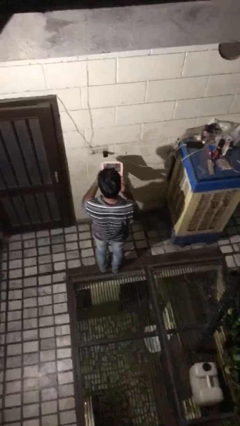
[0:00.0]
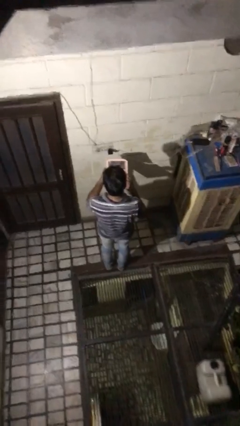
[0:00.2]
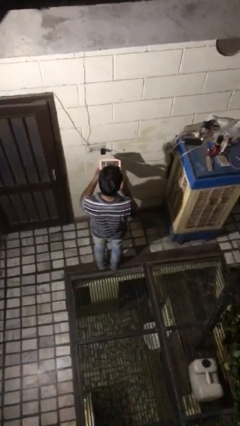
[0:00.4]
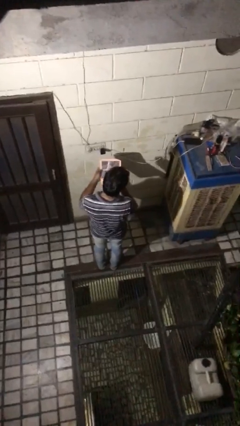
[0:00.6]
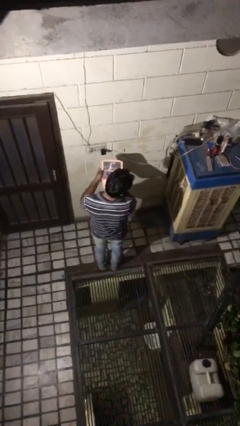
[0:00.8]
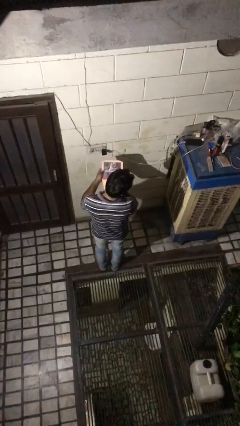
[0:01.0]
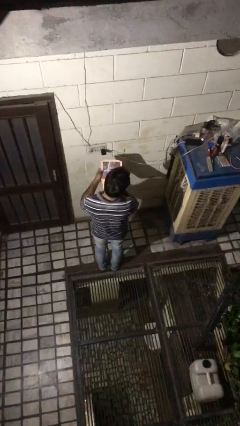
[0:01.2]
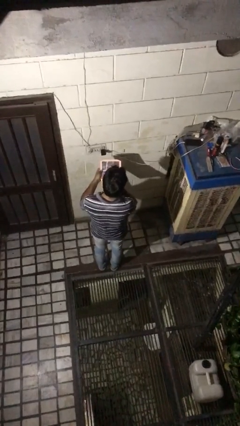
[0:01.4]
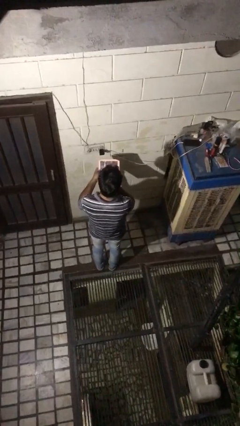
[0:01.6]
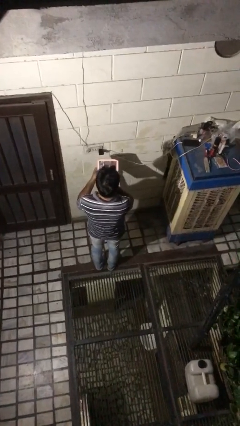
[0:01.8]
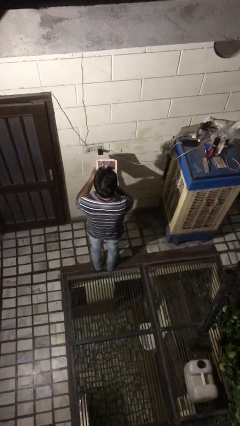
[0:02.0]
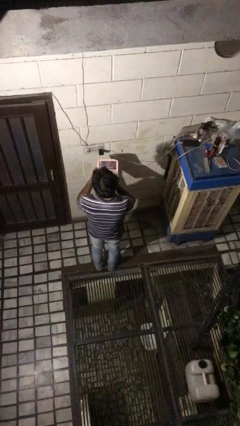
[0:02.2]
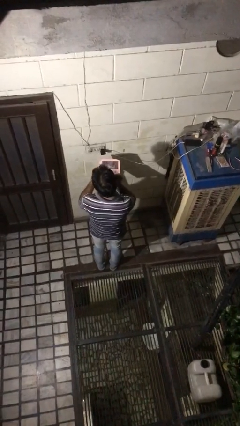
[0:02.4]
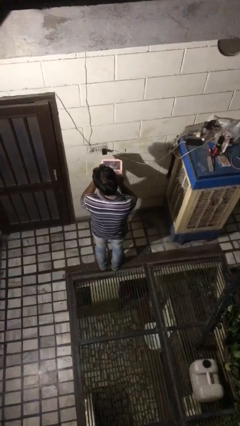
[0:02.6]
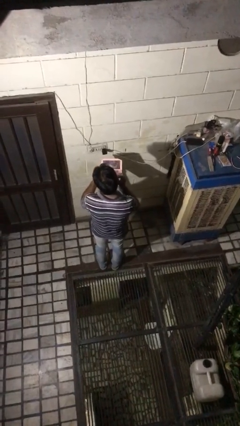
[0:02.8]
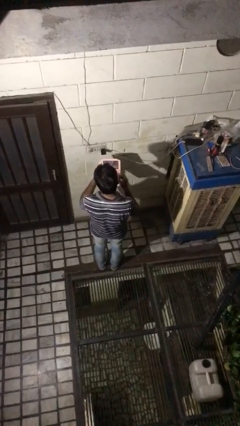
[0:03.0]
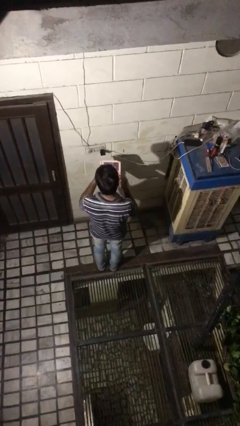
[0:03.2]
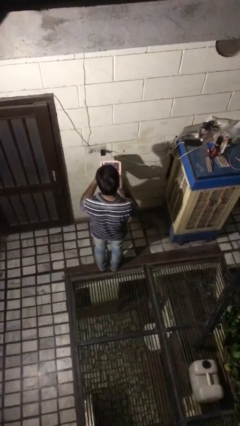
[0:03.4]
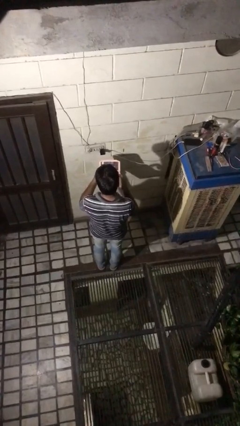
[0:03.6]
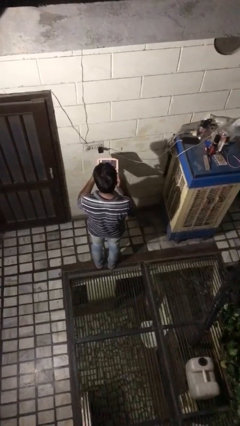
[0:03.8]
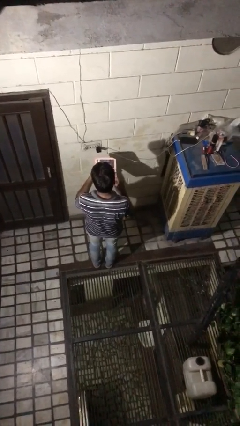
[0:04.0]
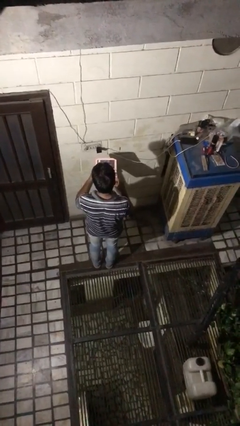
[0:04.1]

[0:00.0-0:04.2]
person applies foundation makeup

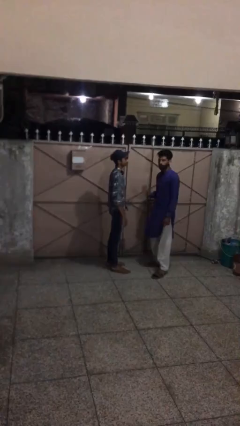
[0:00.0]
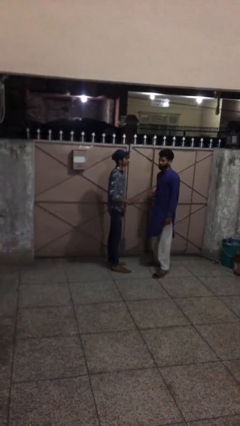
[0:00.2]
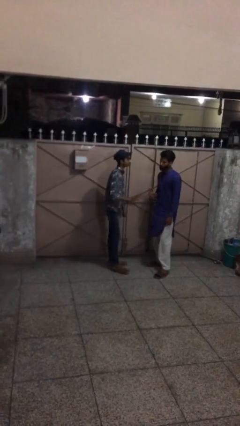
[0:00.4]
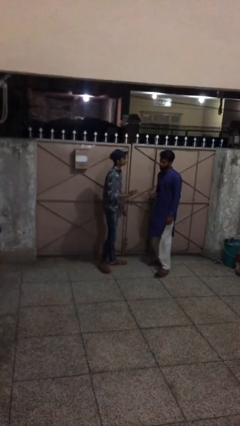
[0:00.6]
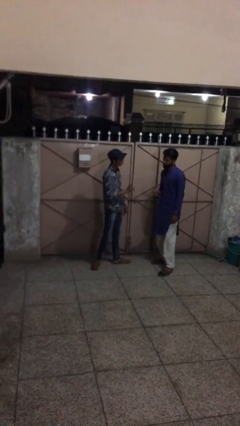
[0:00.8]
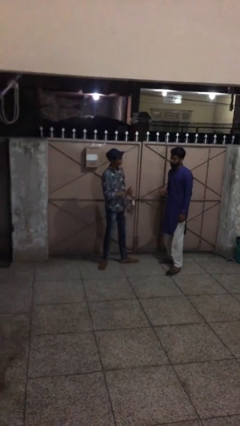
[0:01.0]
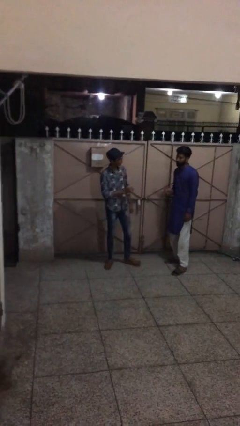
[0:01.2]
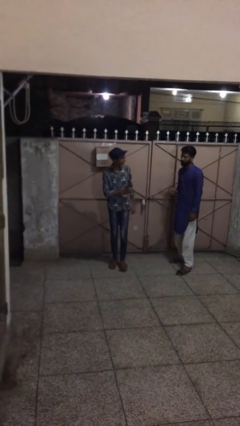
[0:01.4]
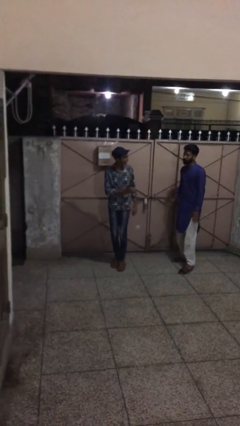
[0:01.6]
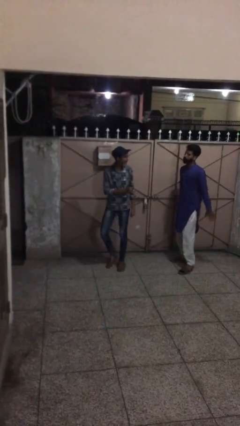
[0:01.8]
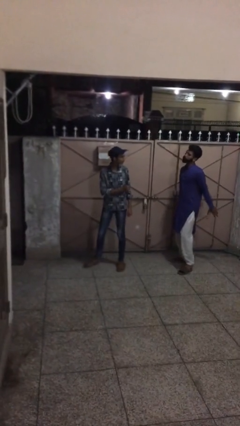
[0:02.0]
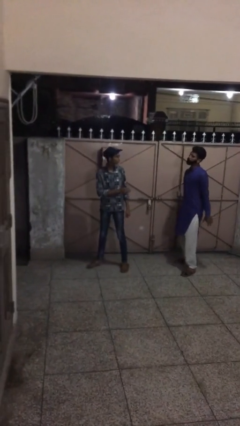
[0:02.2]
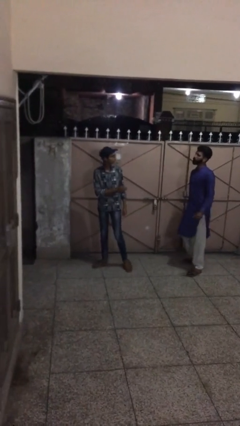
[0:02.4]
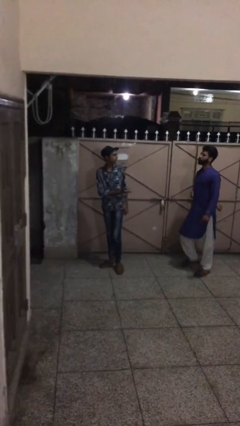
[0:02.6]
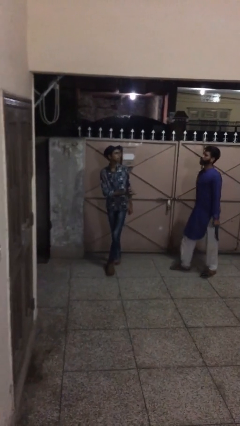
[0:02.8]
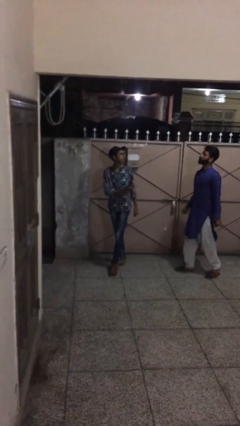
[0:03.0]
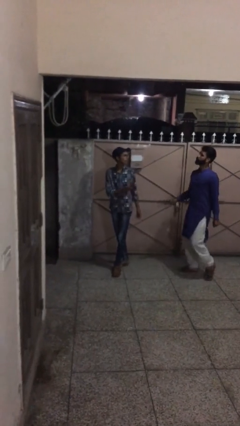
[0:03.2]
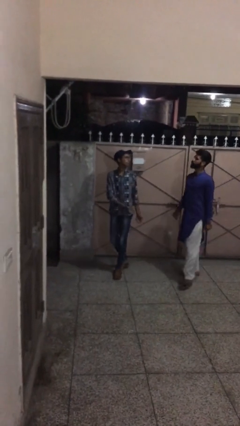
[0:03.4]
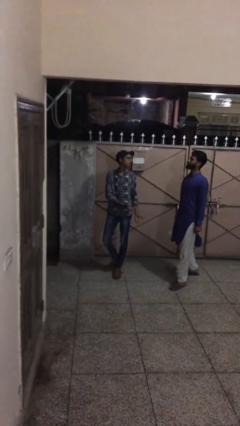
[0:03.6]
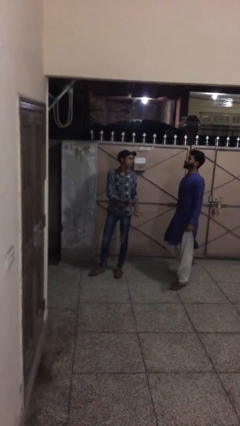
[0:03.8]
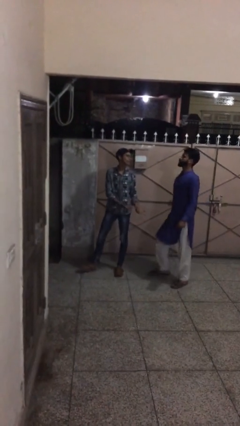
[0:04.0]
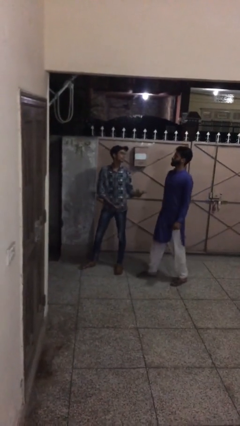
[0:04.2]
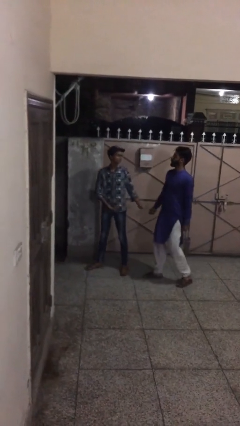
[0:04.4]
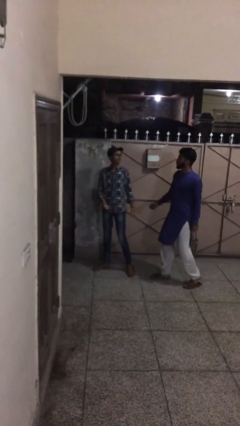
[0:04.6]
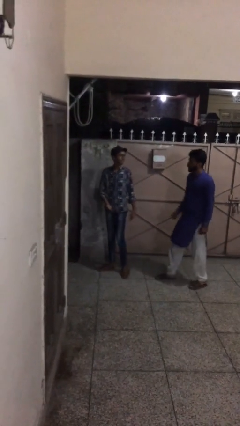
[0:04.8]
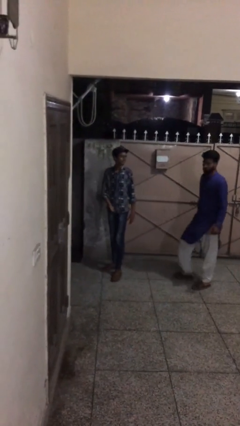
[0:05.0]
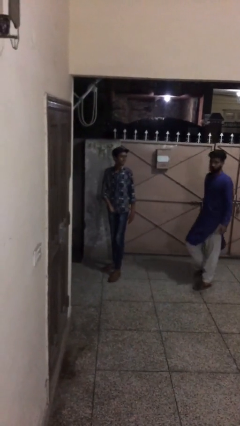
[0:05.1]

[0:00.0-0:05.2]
person talks to person

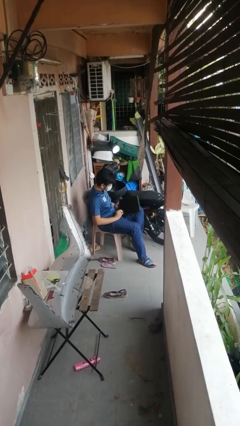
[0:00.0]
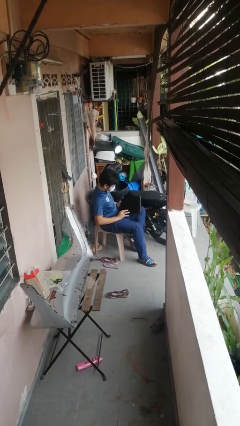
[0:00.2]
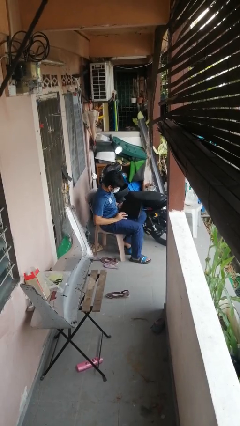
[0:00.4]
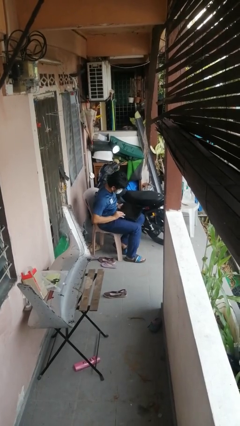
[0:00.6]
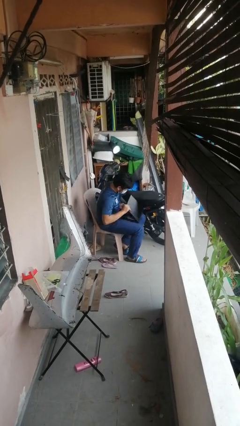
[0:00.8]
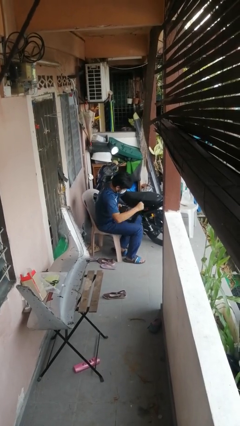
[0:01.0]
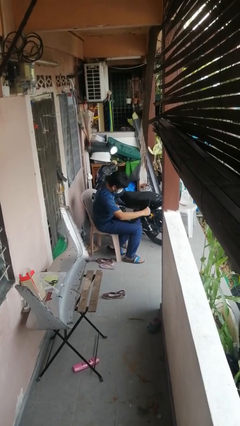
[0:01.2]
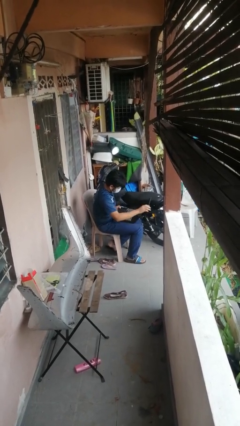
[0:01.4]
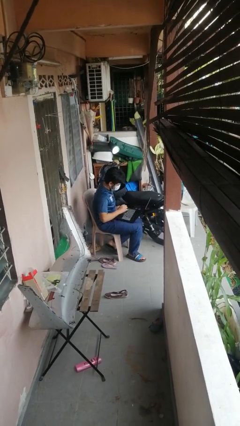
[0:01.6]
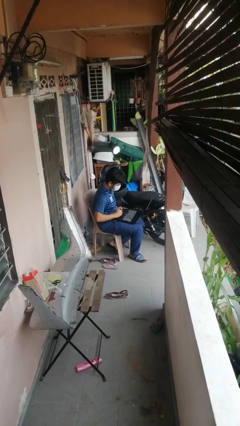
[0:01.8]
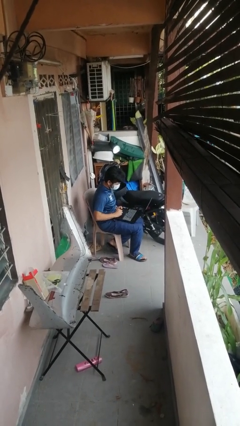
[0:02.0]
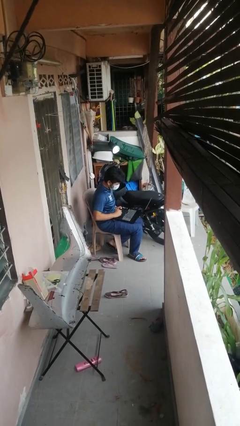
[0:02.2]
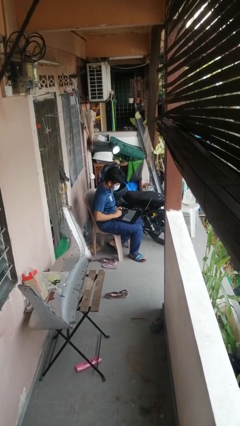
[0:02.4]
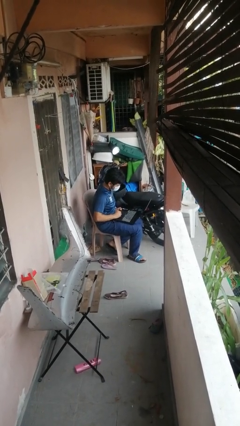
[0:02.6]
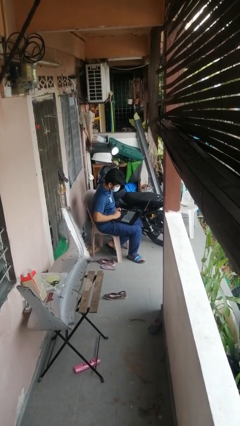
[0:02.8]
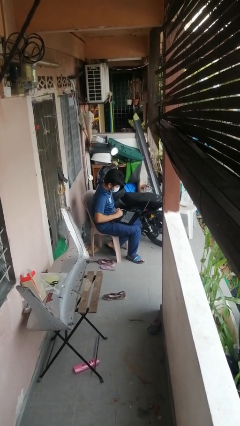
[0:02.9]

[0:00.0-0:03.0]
person opens laptop

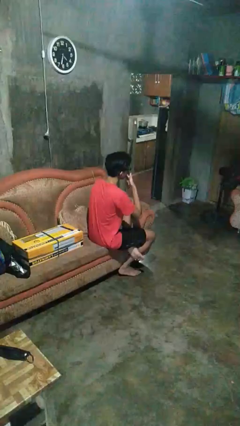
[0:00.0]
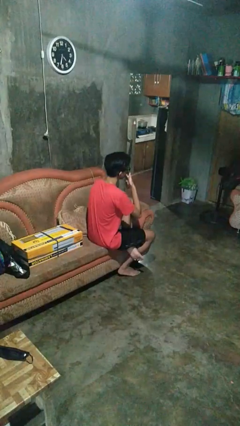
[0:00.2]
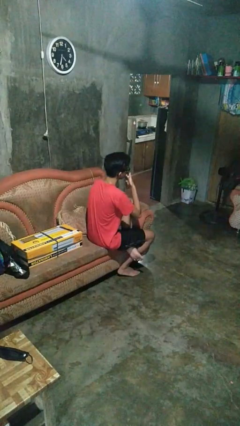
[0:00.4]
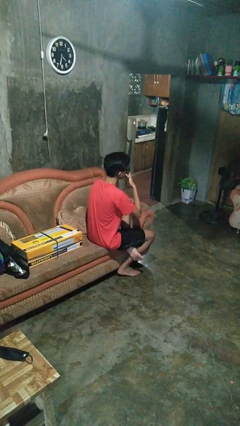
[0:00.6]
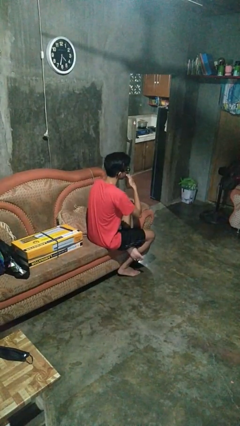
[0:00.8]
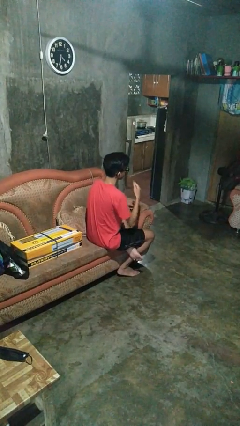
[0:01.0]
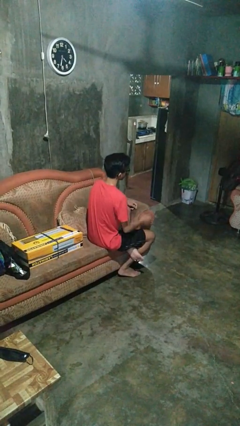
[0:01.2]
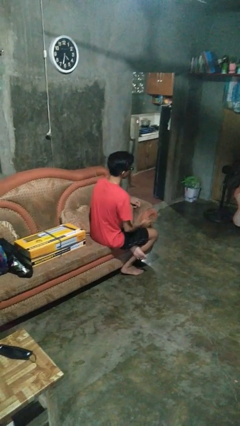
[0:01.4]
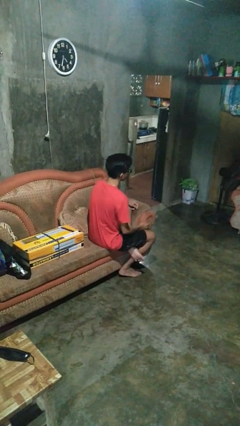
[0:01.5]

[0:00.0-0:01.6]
person licks fingers

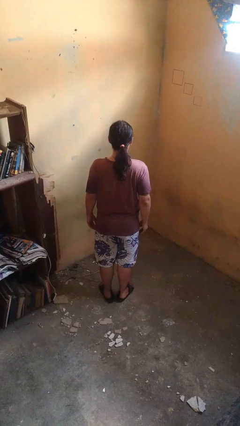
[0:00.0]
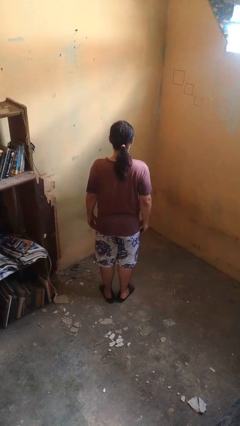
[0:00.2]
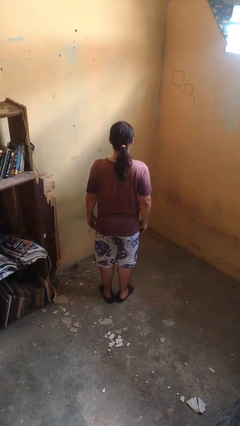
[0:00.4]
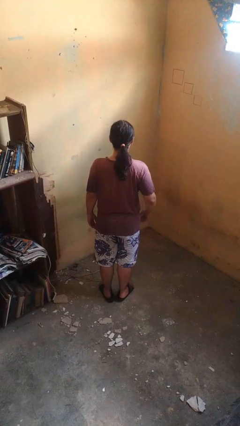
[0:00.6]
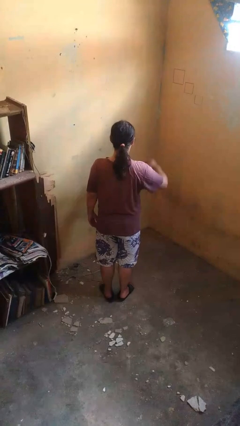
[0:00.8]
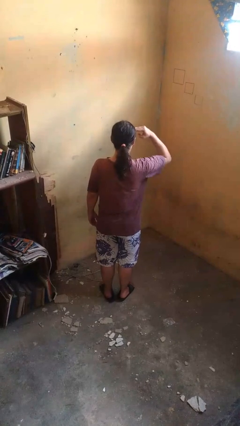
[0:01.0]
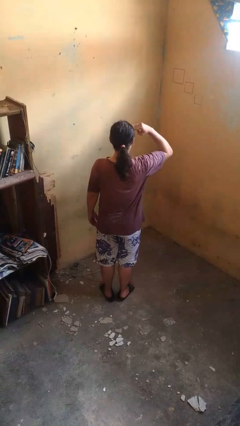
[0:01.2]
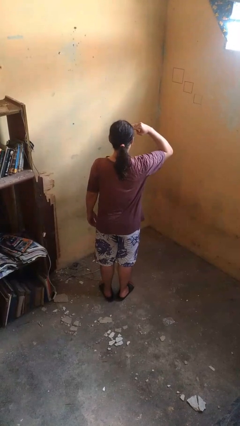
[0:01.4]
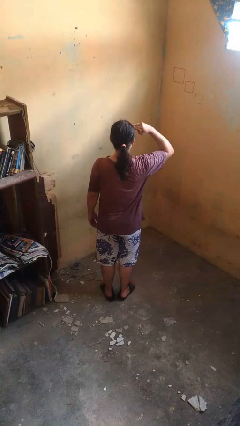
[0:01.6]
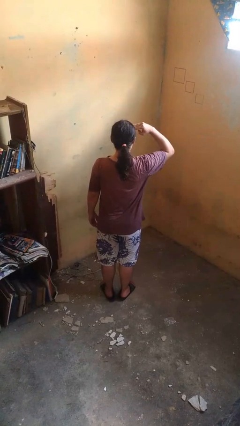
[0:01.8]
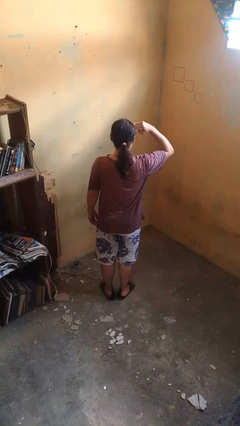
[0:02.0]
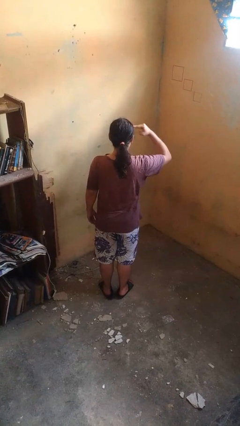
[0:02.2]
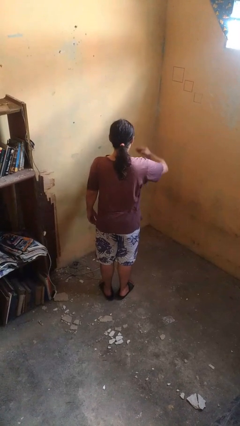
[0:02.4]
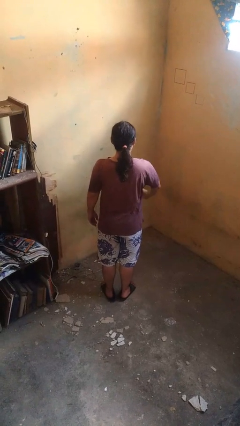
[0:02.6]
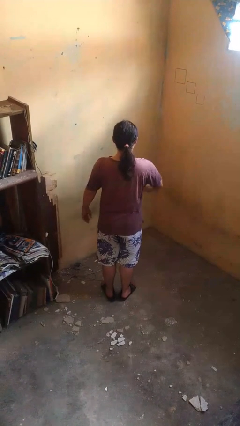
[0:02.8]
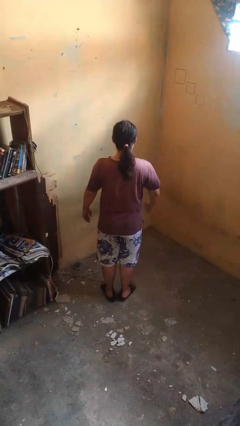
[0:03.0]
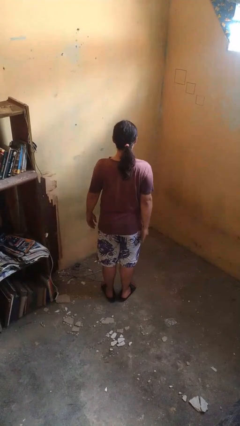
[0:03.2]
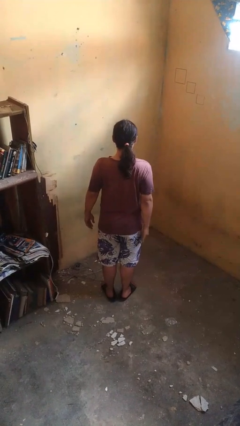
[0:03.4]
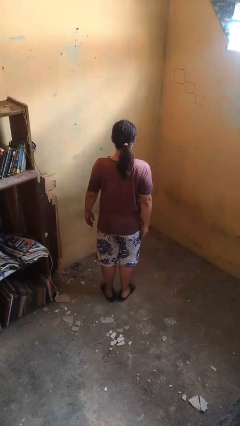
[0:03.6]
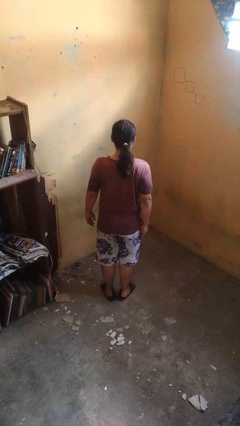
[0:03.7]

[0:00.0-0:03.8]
person salutes

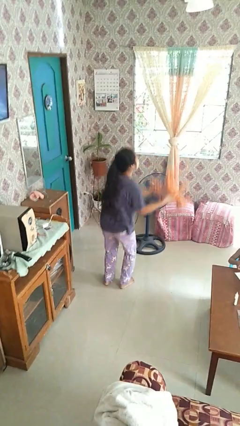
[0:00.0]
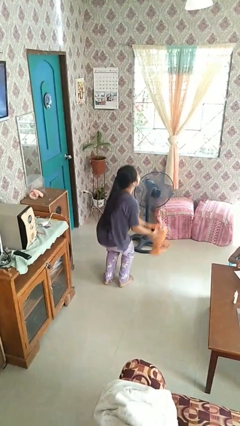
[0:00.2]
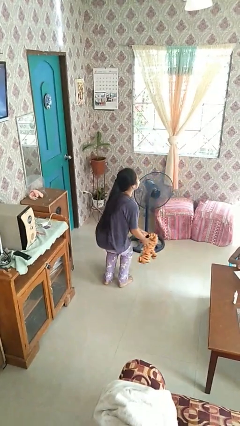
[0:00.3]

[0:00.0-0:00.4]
person catches dropped object
